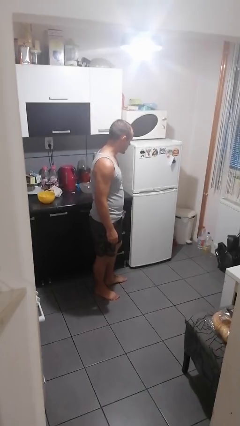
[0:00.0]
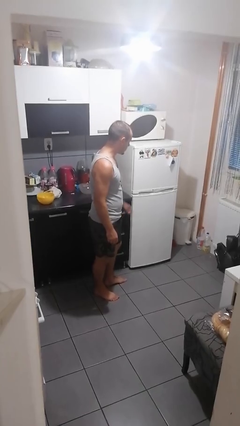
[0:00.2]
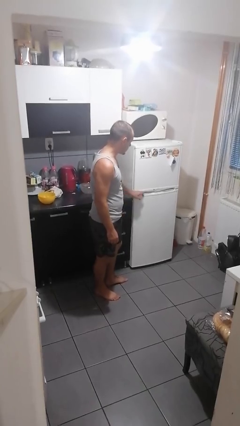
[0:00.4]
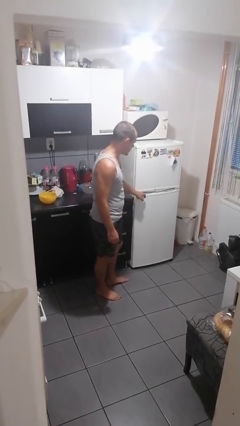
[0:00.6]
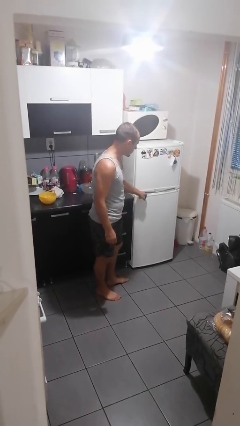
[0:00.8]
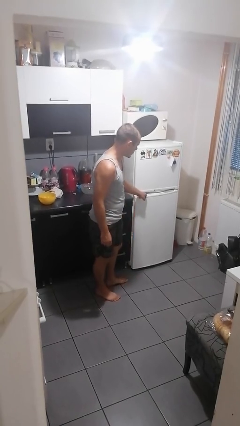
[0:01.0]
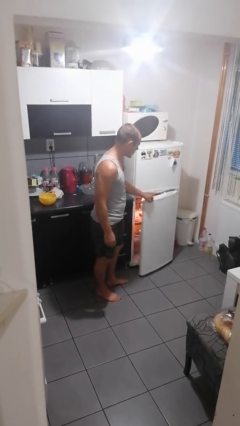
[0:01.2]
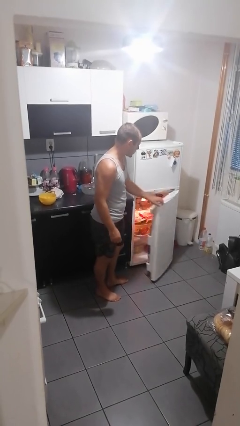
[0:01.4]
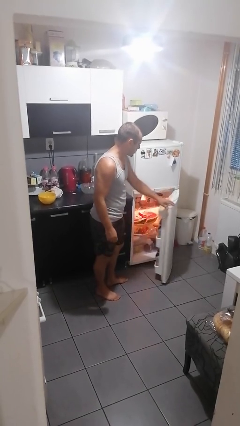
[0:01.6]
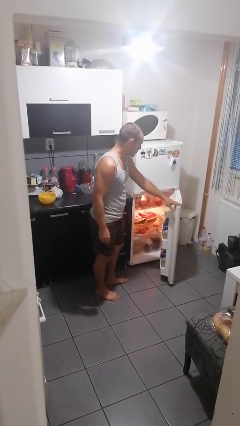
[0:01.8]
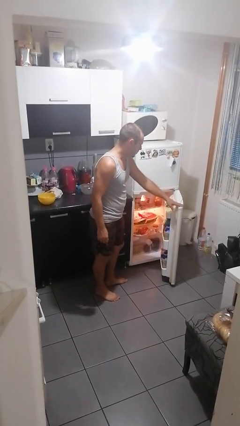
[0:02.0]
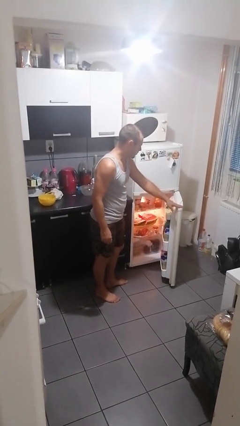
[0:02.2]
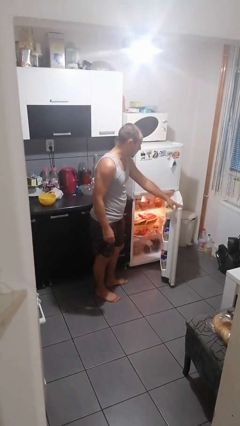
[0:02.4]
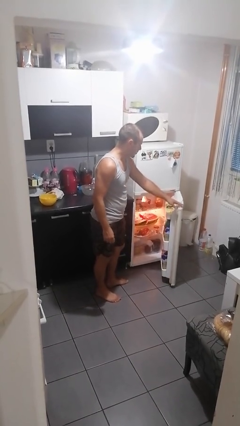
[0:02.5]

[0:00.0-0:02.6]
person opens refrigerator

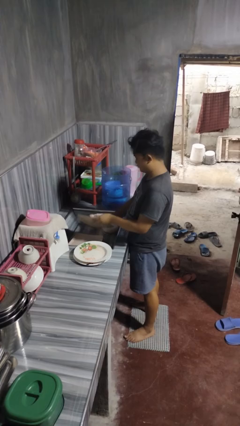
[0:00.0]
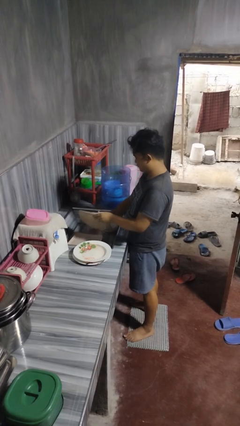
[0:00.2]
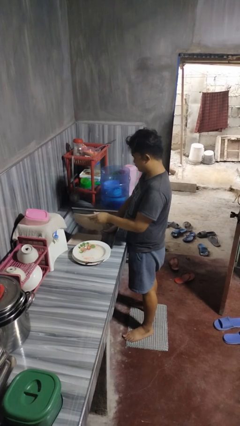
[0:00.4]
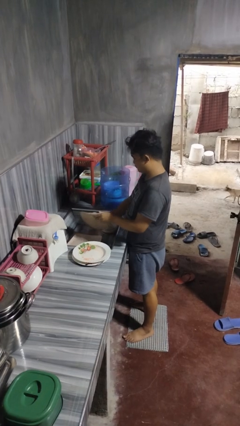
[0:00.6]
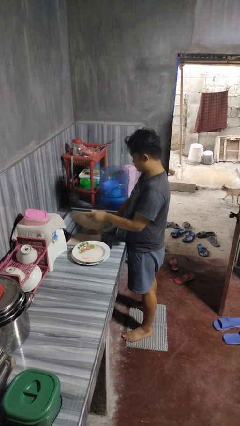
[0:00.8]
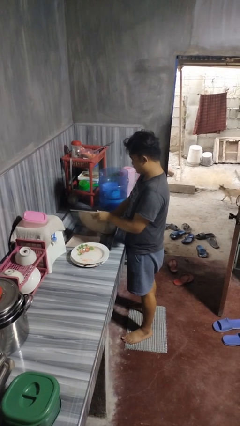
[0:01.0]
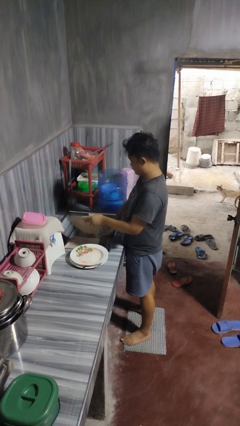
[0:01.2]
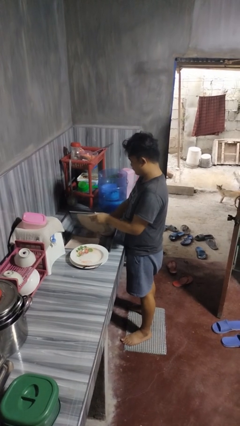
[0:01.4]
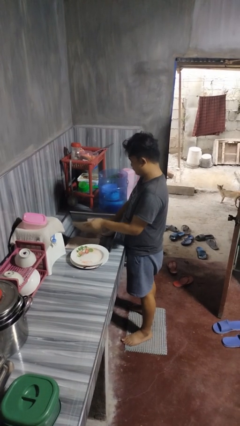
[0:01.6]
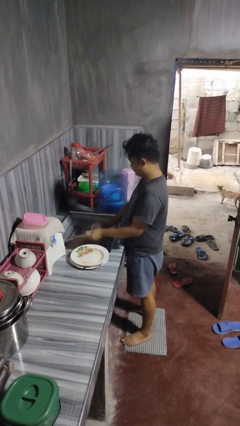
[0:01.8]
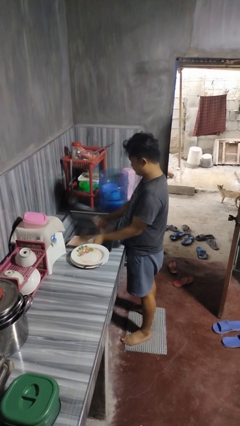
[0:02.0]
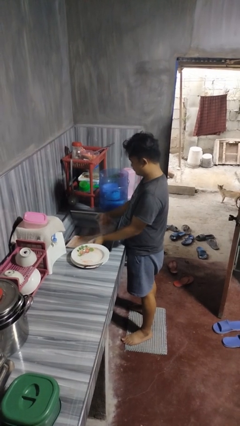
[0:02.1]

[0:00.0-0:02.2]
person washes dish

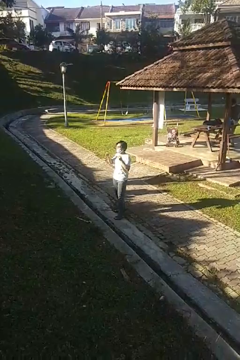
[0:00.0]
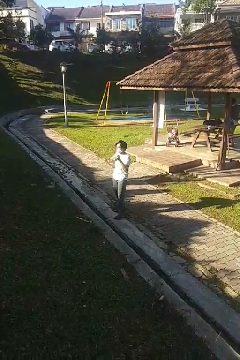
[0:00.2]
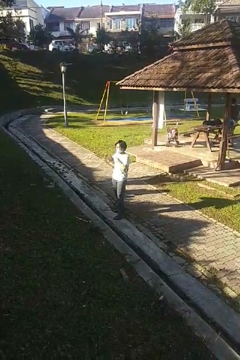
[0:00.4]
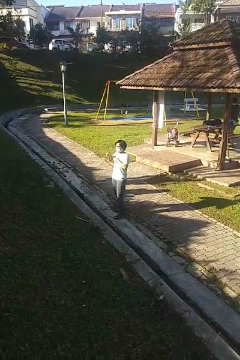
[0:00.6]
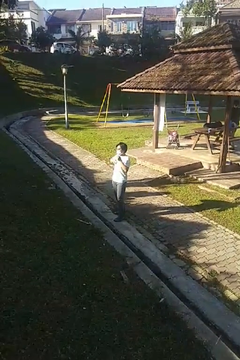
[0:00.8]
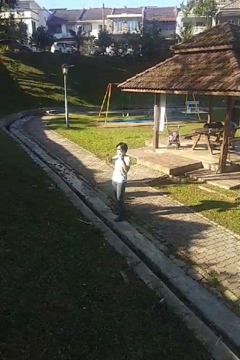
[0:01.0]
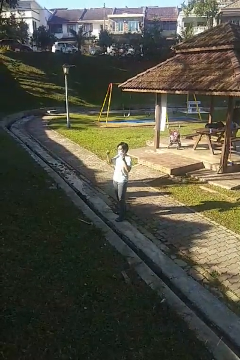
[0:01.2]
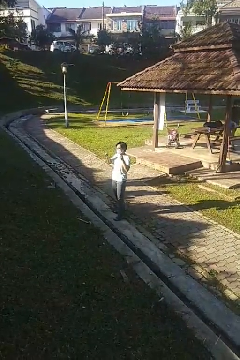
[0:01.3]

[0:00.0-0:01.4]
person drums on chest

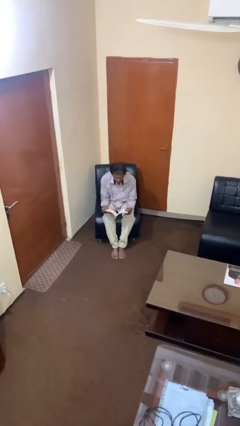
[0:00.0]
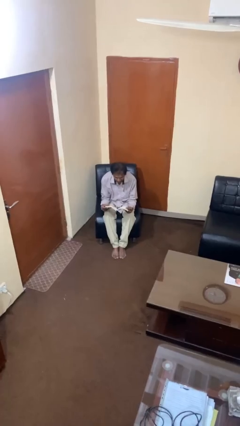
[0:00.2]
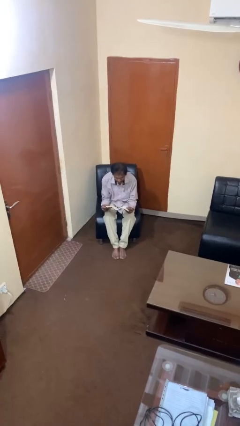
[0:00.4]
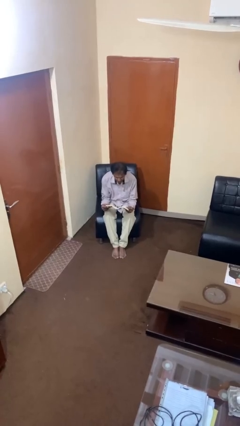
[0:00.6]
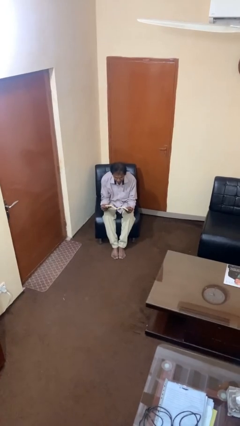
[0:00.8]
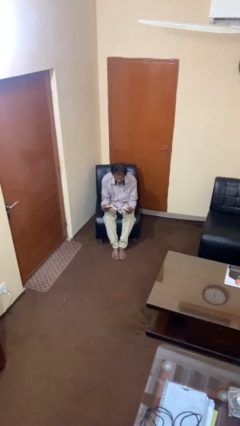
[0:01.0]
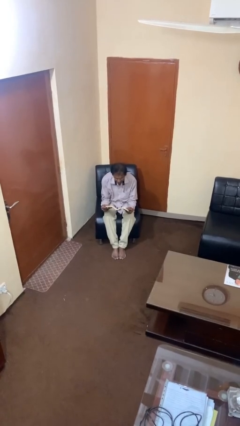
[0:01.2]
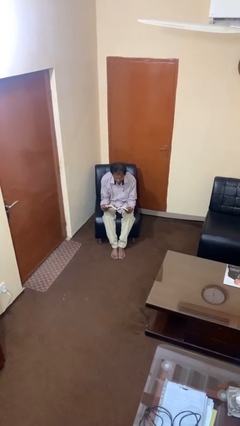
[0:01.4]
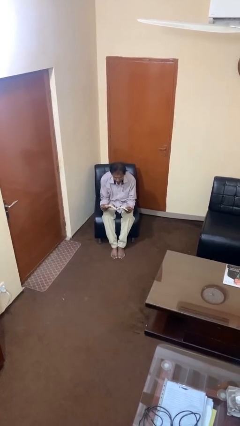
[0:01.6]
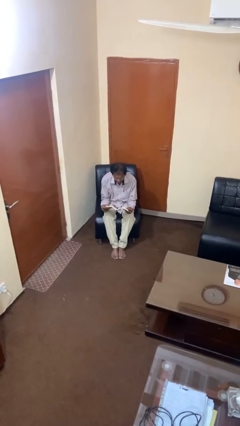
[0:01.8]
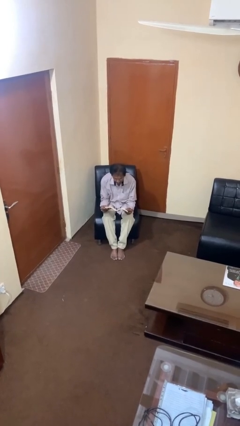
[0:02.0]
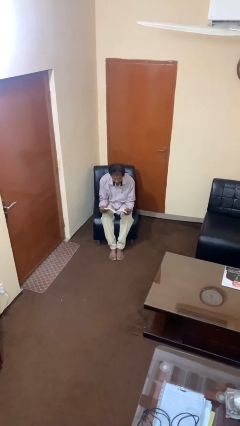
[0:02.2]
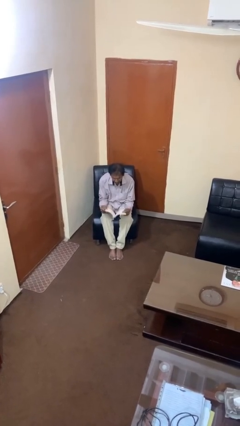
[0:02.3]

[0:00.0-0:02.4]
person reads book

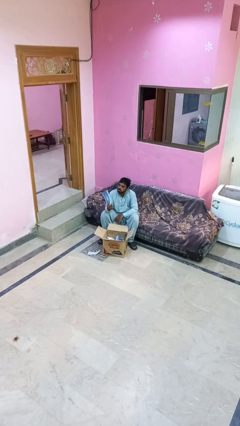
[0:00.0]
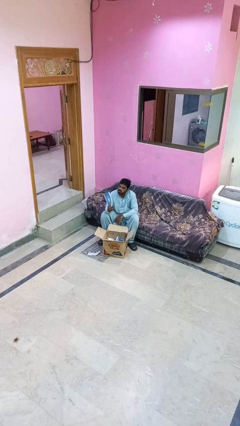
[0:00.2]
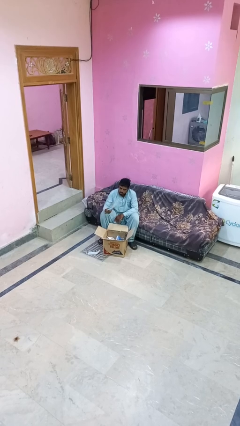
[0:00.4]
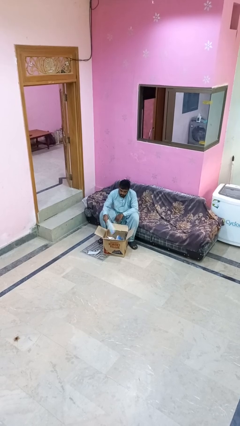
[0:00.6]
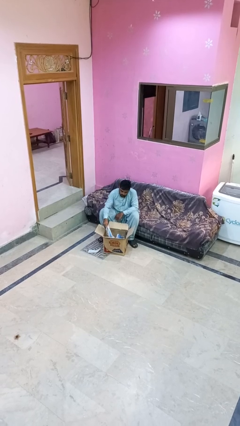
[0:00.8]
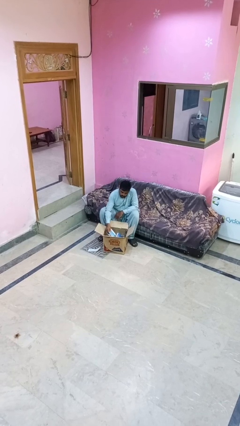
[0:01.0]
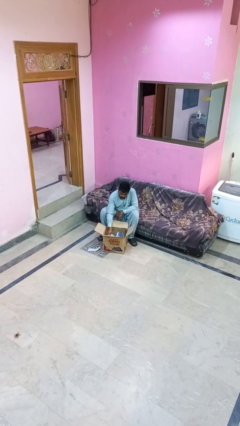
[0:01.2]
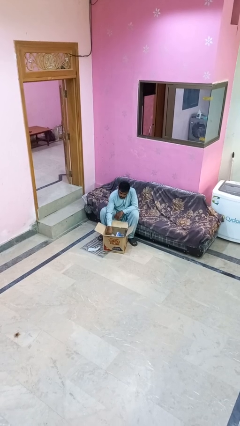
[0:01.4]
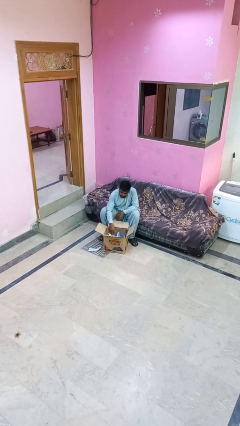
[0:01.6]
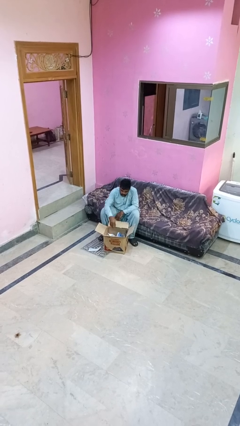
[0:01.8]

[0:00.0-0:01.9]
person puts object into box

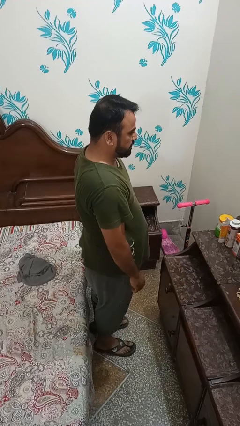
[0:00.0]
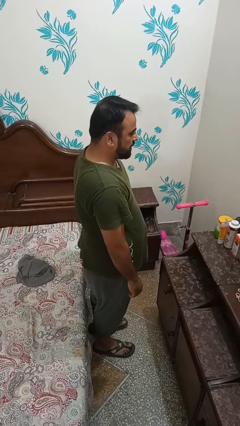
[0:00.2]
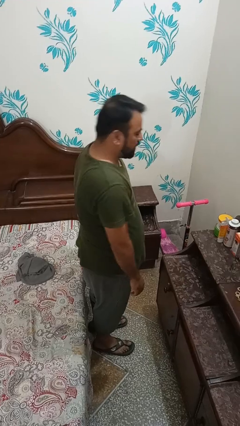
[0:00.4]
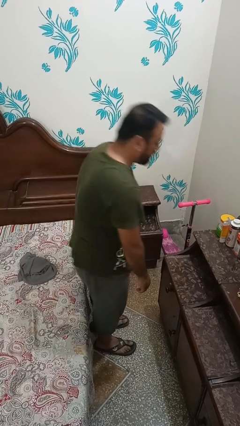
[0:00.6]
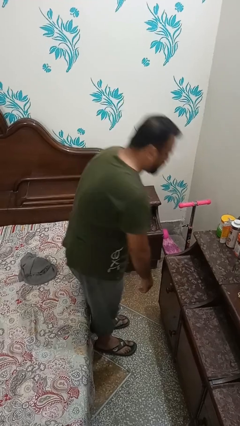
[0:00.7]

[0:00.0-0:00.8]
person opens dresser drawer

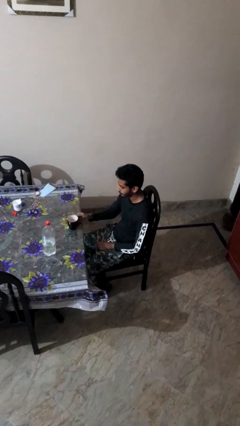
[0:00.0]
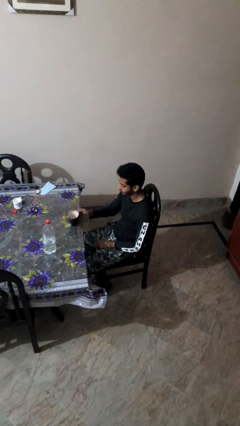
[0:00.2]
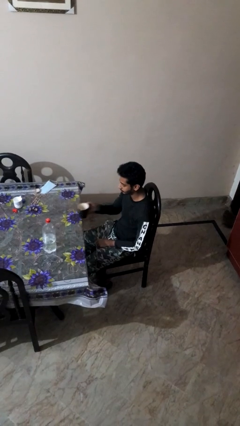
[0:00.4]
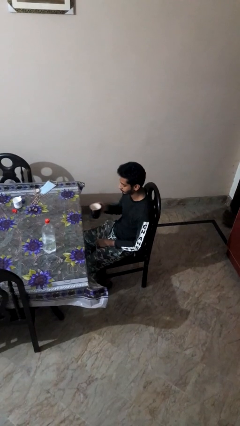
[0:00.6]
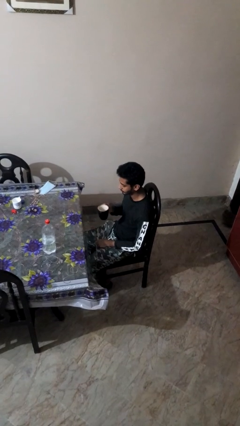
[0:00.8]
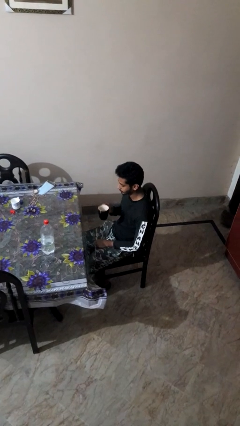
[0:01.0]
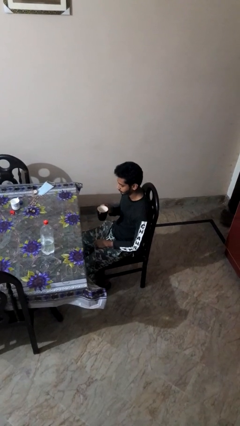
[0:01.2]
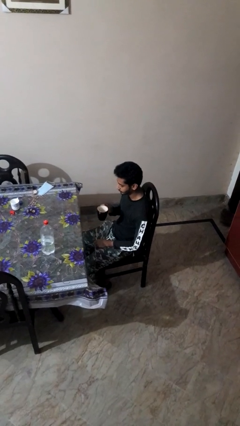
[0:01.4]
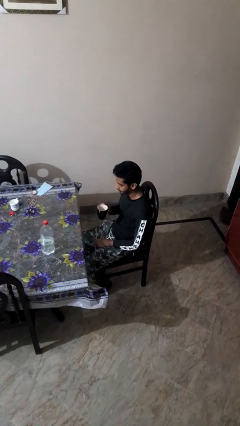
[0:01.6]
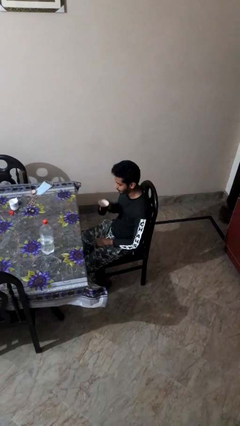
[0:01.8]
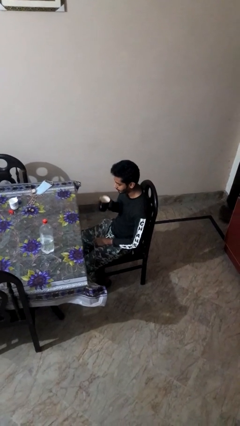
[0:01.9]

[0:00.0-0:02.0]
person picks up object from table

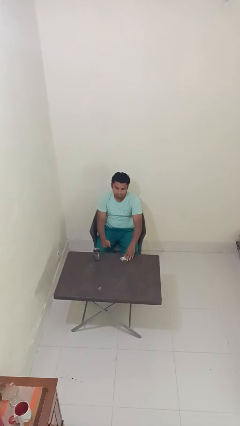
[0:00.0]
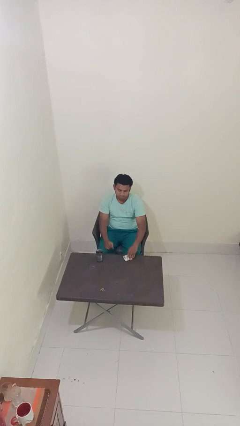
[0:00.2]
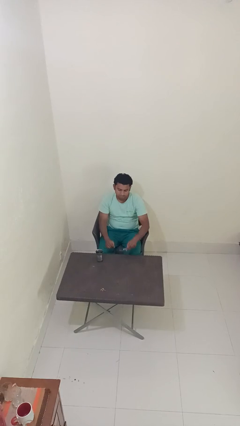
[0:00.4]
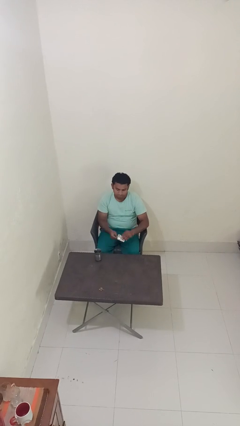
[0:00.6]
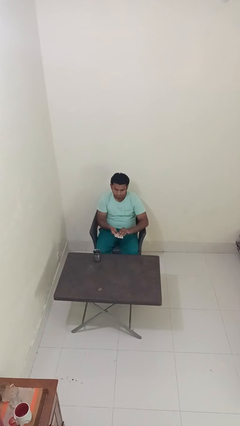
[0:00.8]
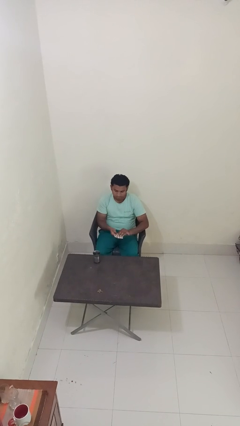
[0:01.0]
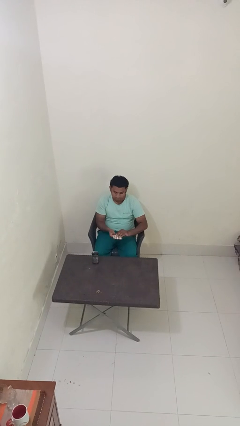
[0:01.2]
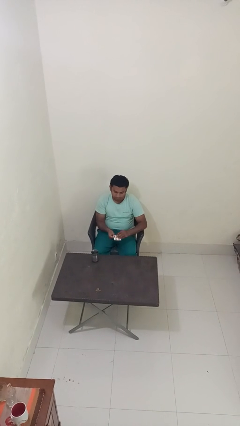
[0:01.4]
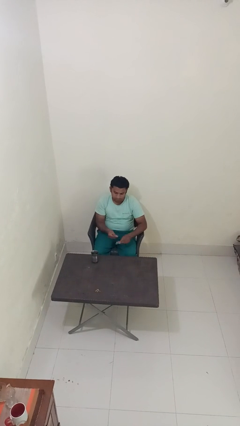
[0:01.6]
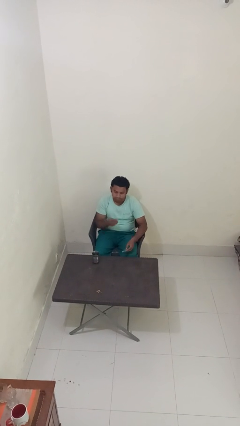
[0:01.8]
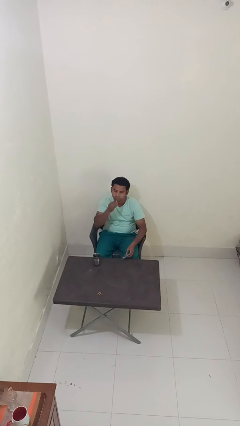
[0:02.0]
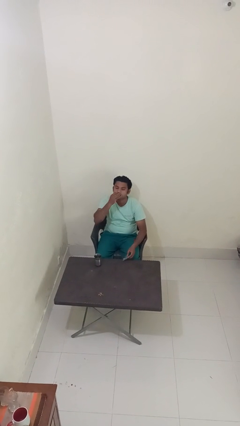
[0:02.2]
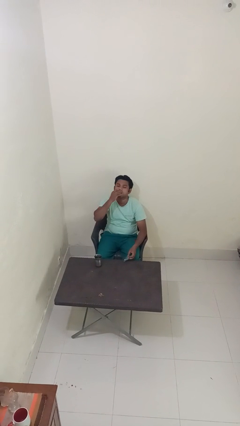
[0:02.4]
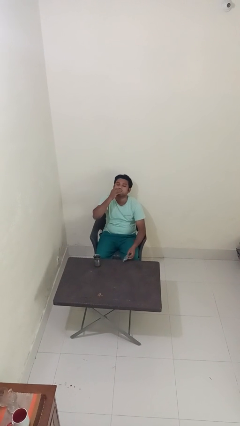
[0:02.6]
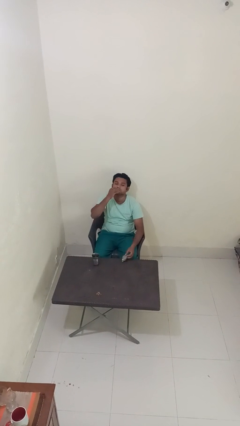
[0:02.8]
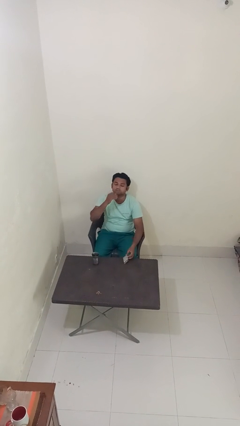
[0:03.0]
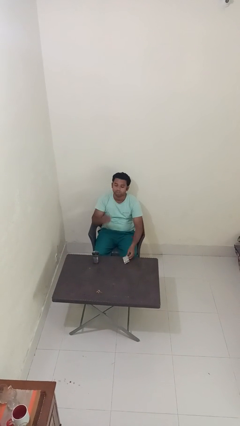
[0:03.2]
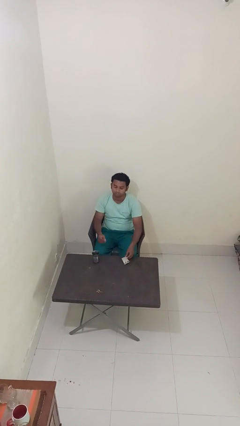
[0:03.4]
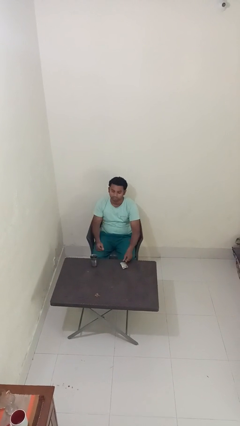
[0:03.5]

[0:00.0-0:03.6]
person takes medicine pills

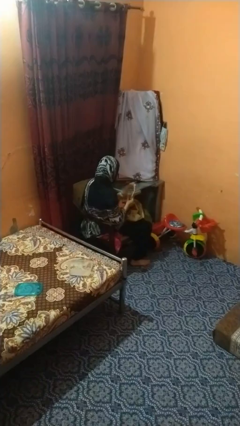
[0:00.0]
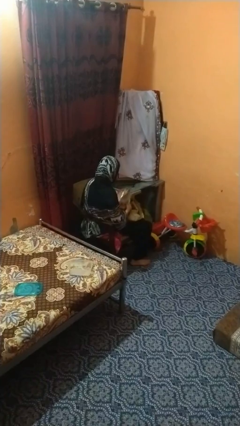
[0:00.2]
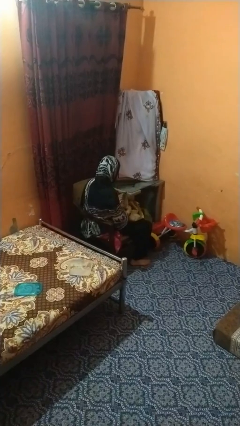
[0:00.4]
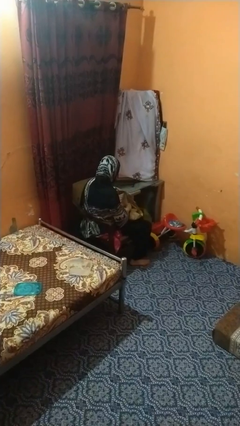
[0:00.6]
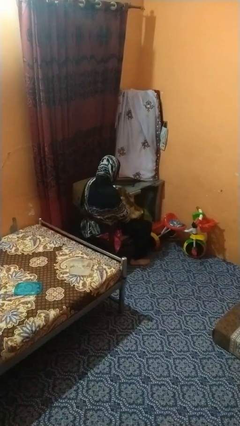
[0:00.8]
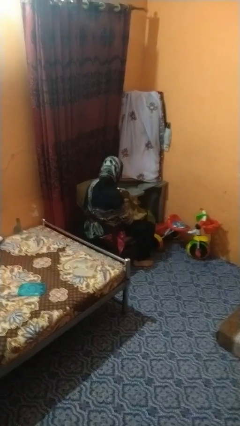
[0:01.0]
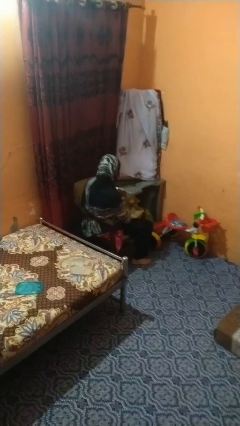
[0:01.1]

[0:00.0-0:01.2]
person puts object into bag
